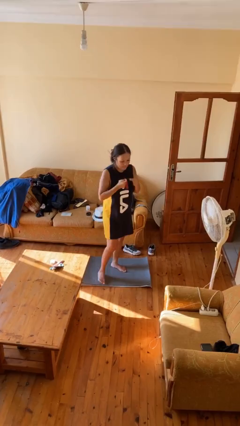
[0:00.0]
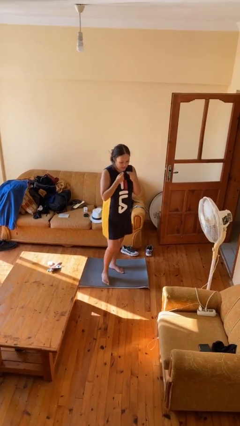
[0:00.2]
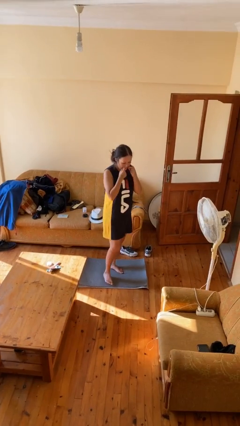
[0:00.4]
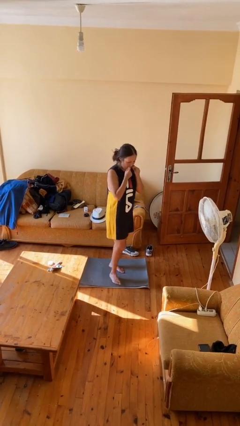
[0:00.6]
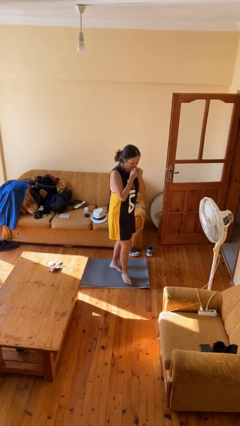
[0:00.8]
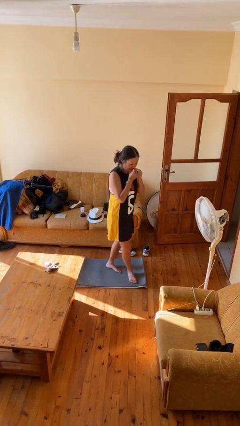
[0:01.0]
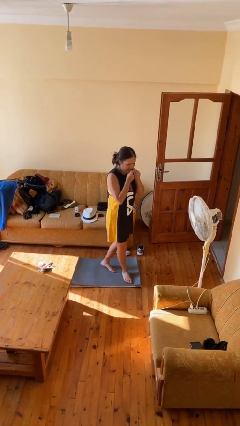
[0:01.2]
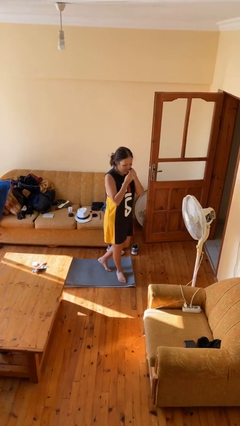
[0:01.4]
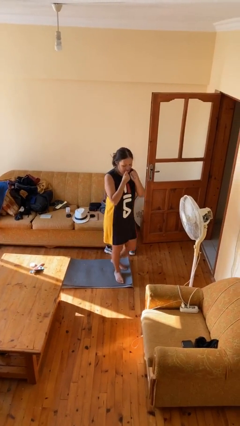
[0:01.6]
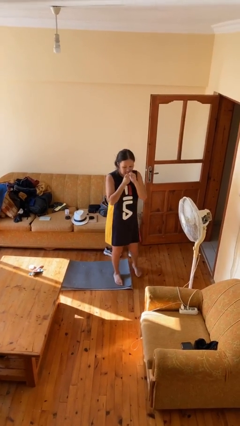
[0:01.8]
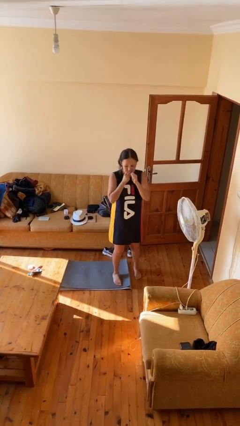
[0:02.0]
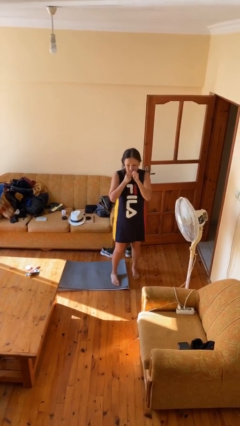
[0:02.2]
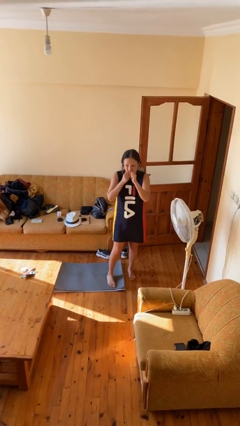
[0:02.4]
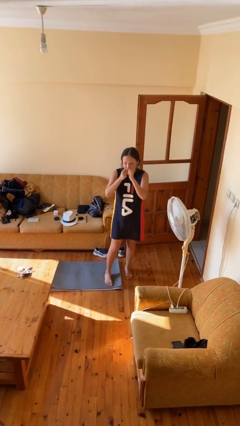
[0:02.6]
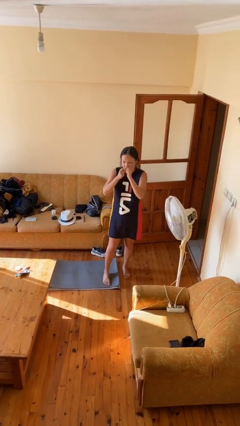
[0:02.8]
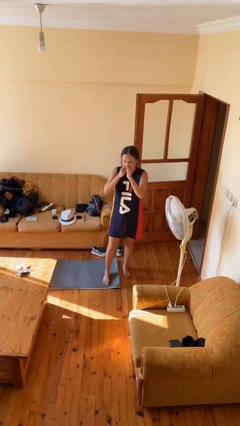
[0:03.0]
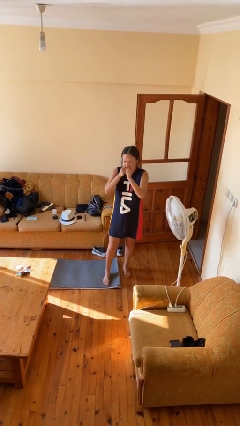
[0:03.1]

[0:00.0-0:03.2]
person flosses

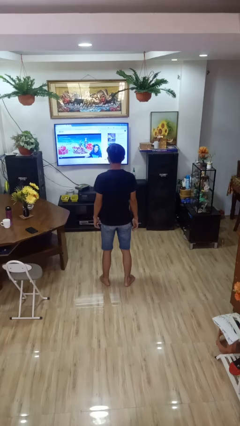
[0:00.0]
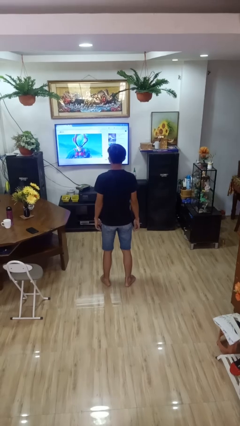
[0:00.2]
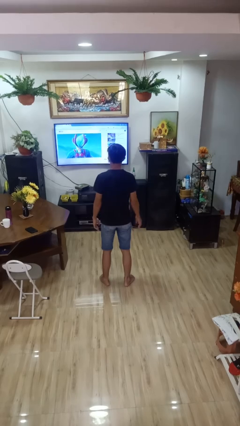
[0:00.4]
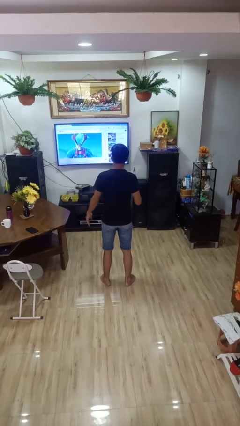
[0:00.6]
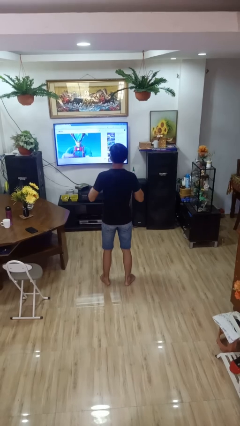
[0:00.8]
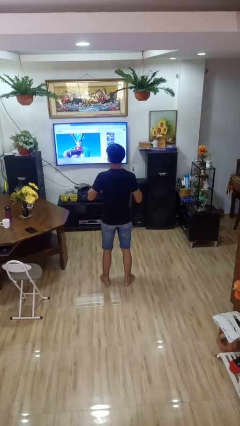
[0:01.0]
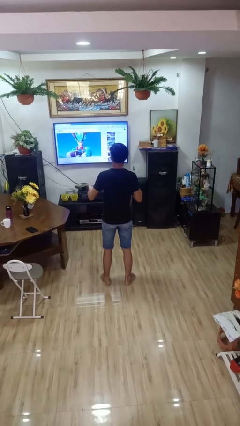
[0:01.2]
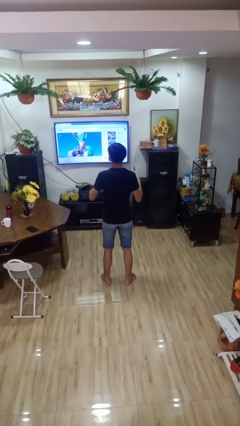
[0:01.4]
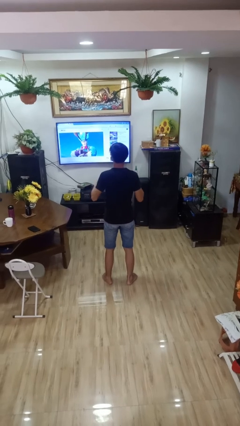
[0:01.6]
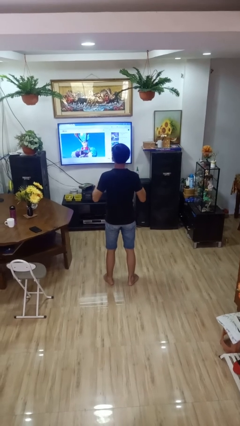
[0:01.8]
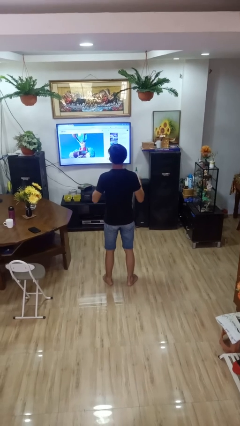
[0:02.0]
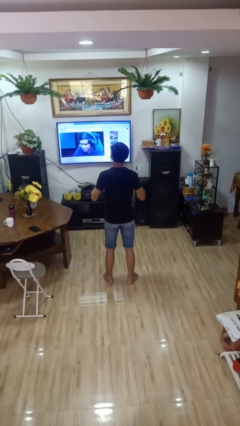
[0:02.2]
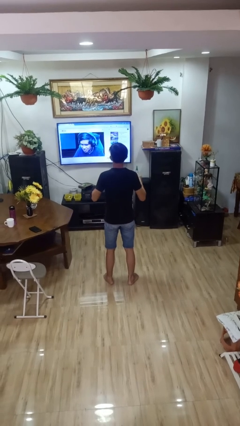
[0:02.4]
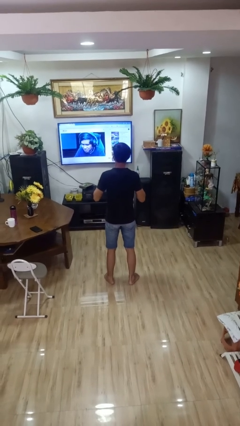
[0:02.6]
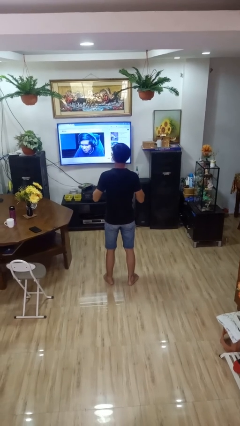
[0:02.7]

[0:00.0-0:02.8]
person drums on chest

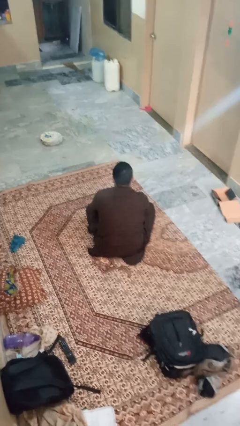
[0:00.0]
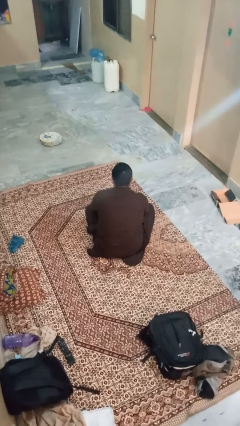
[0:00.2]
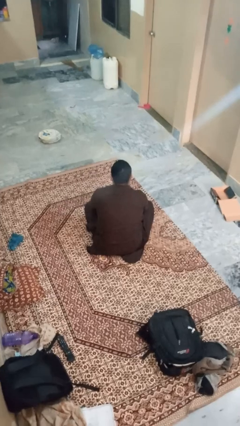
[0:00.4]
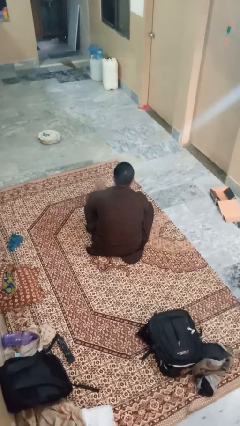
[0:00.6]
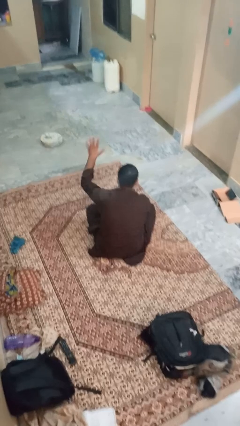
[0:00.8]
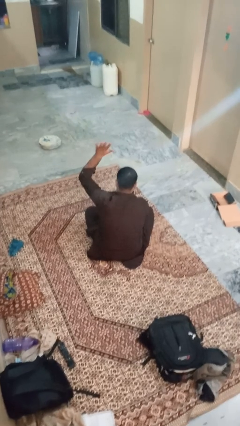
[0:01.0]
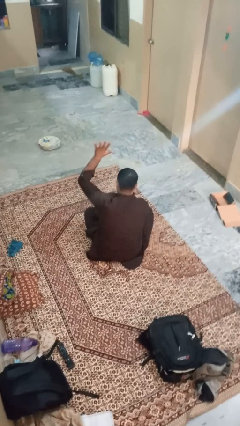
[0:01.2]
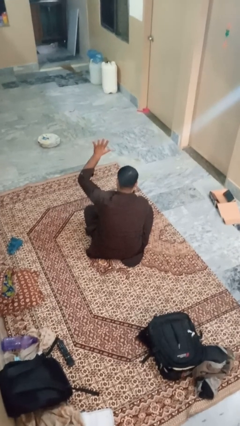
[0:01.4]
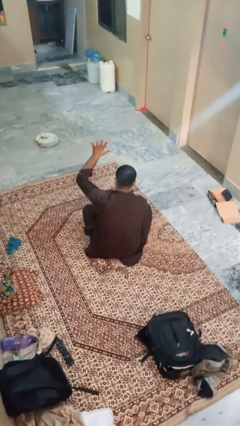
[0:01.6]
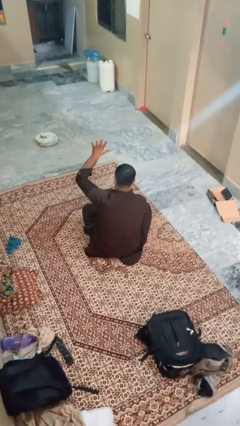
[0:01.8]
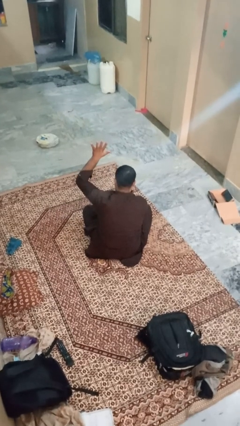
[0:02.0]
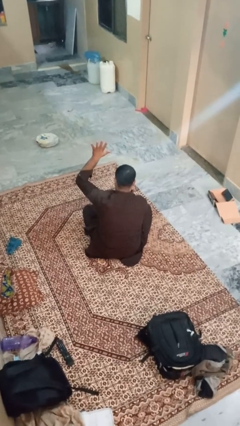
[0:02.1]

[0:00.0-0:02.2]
person gestures number five

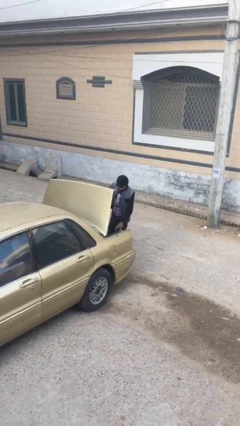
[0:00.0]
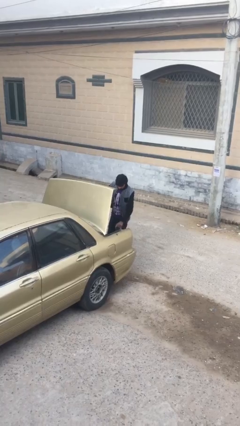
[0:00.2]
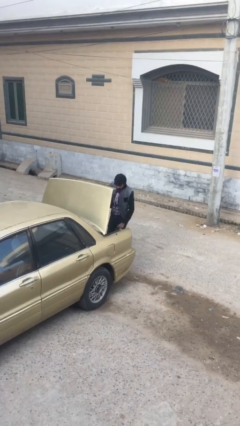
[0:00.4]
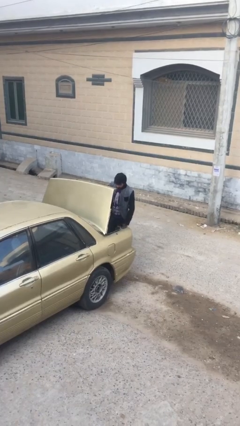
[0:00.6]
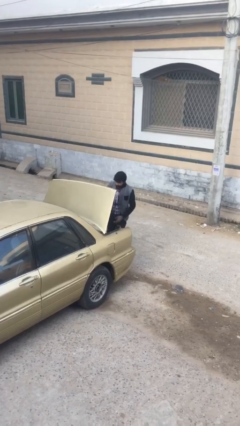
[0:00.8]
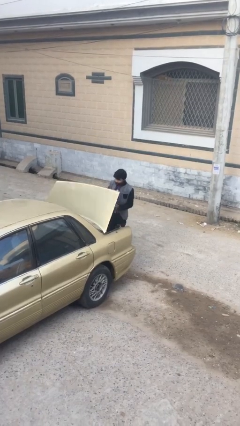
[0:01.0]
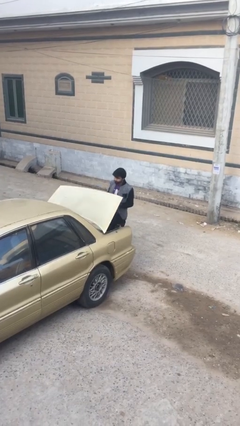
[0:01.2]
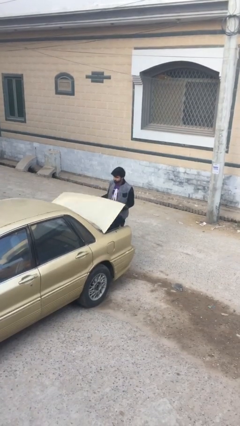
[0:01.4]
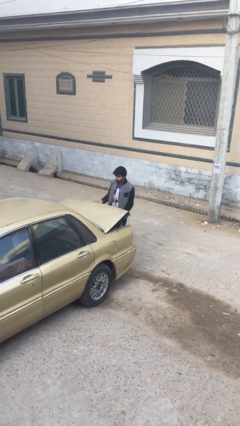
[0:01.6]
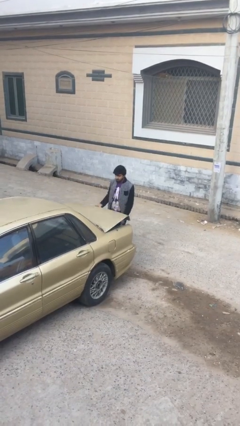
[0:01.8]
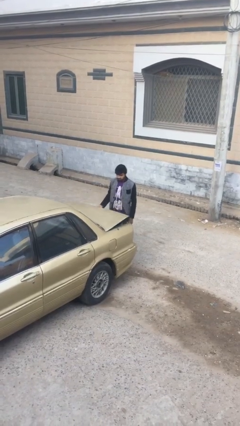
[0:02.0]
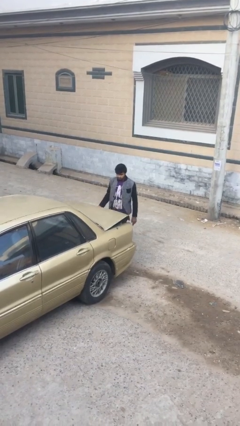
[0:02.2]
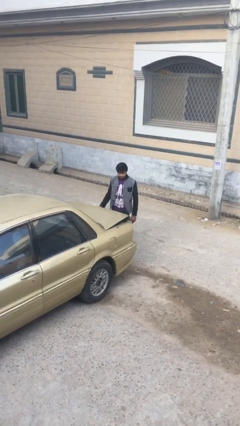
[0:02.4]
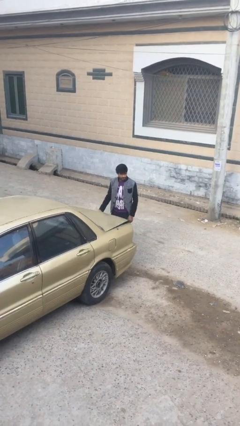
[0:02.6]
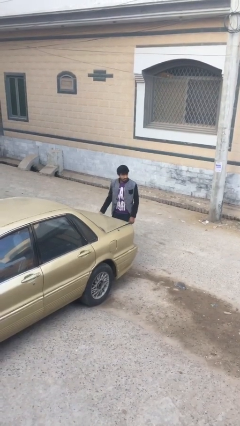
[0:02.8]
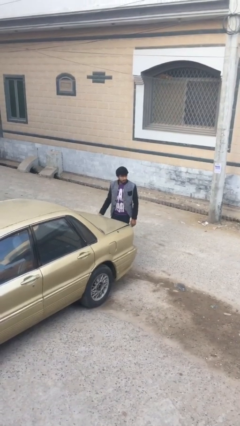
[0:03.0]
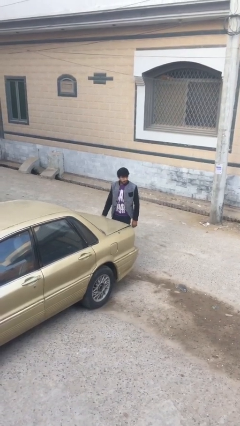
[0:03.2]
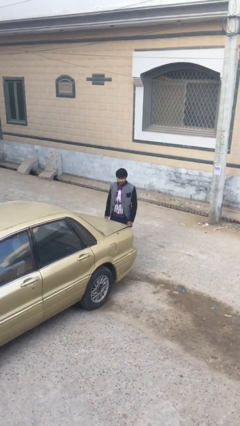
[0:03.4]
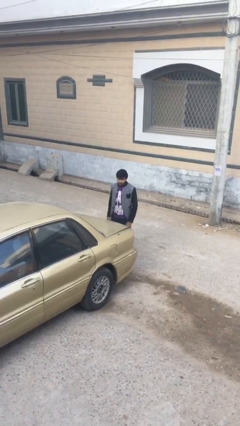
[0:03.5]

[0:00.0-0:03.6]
person closes car trunk

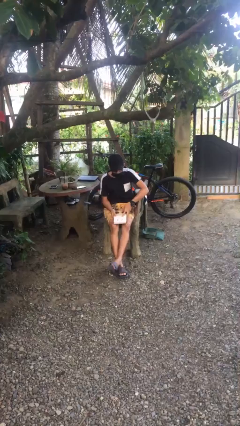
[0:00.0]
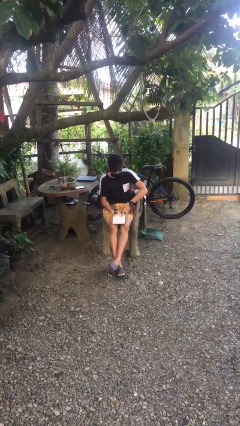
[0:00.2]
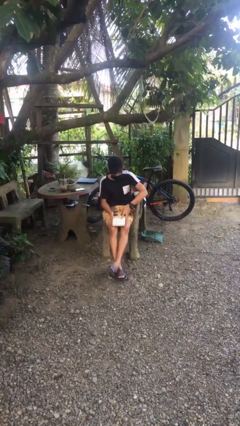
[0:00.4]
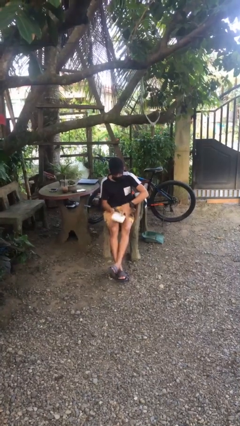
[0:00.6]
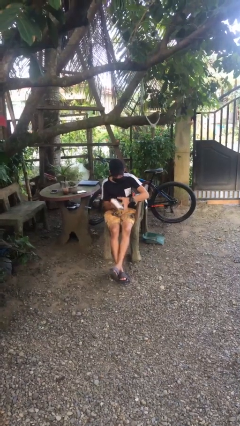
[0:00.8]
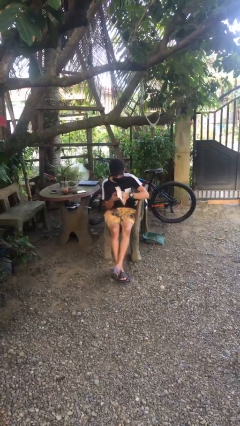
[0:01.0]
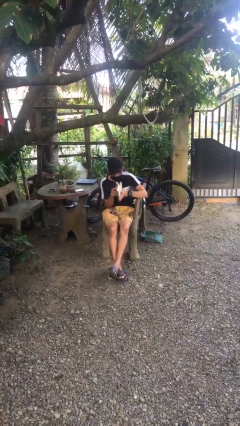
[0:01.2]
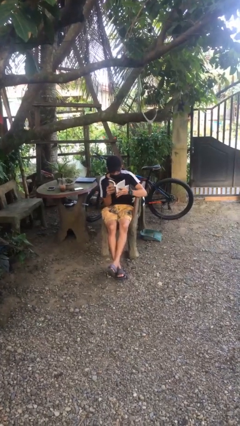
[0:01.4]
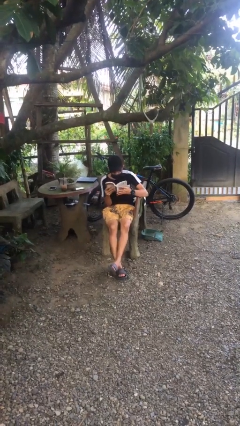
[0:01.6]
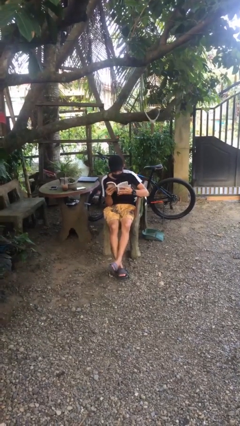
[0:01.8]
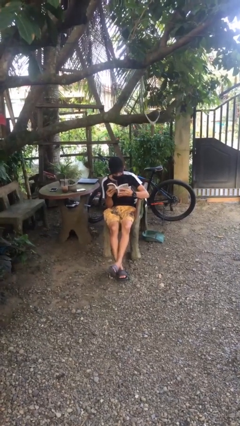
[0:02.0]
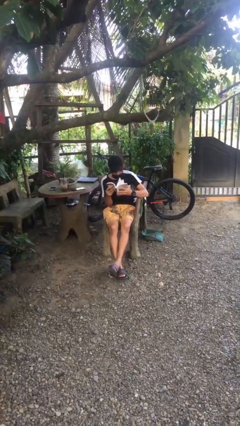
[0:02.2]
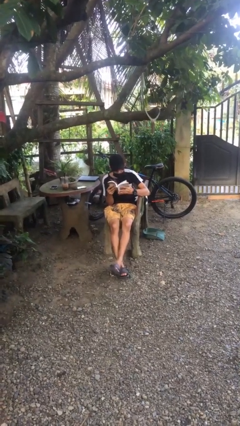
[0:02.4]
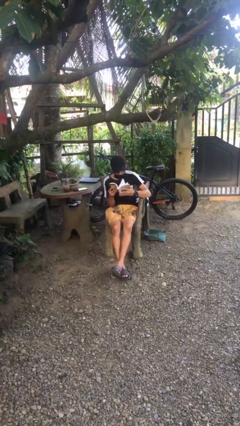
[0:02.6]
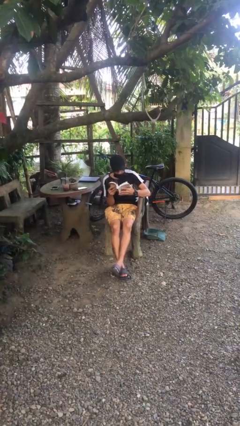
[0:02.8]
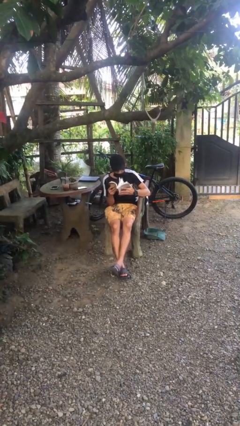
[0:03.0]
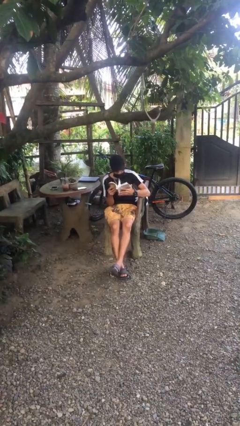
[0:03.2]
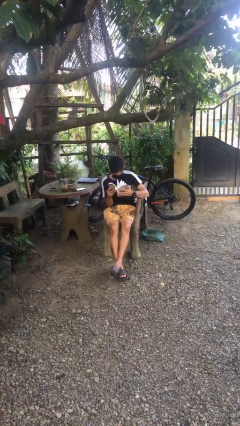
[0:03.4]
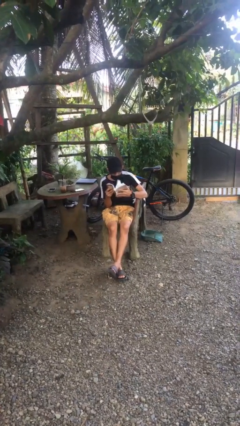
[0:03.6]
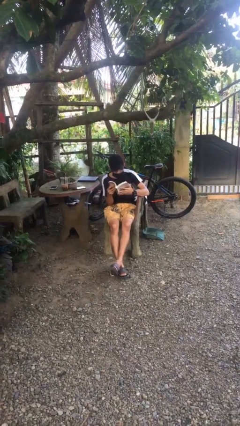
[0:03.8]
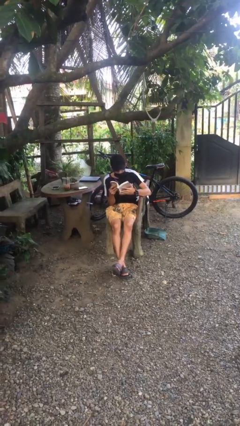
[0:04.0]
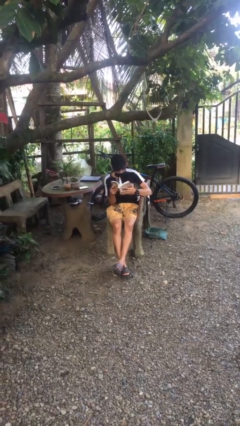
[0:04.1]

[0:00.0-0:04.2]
person reads document

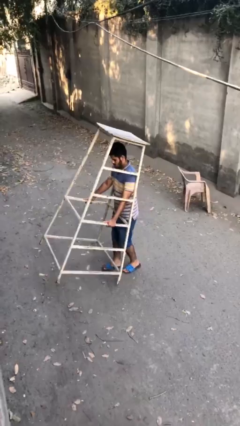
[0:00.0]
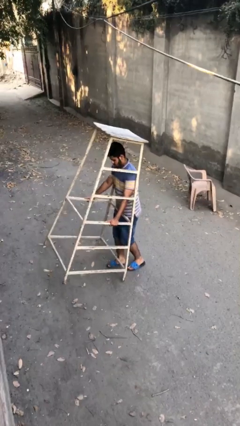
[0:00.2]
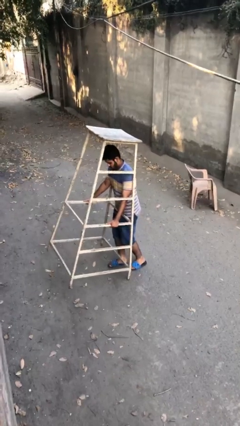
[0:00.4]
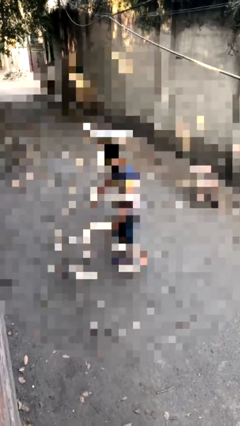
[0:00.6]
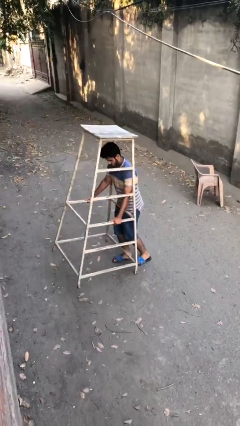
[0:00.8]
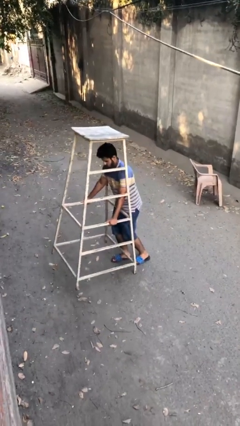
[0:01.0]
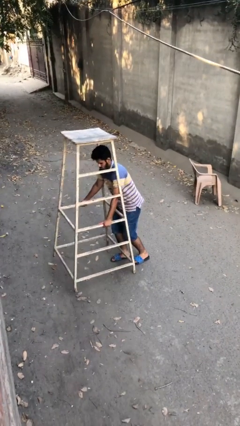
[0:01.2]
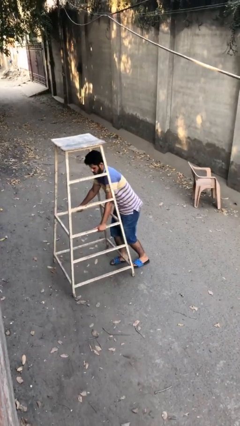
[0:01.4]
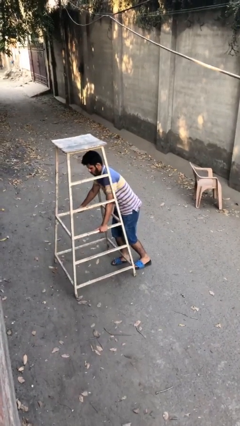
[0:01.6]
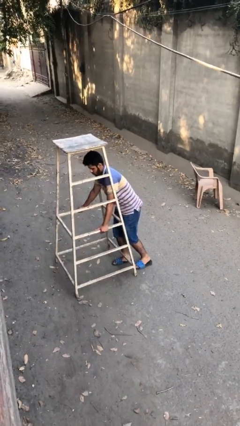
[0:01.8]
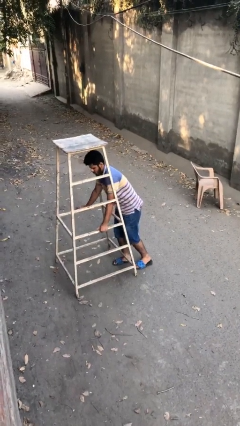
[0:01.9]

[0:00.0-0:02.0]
person puts down object on floor
